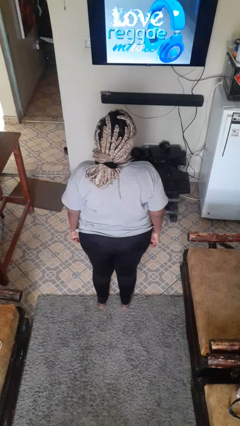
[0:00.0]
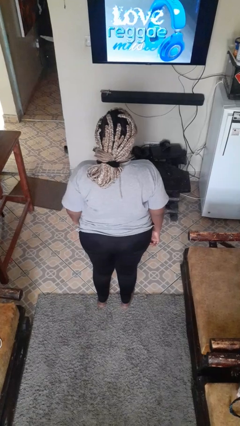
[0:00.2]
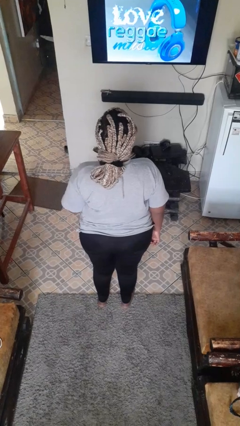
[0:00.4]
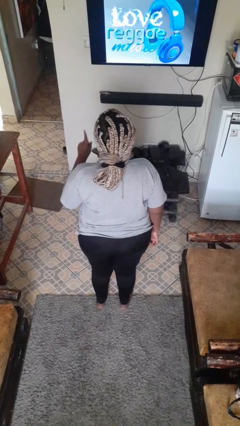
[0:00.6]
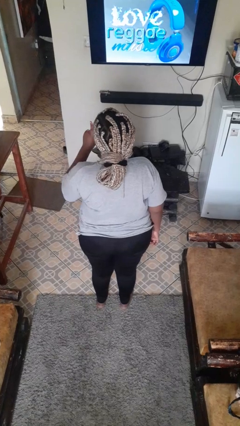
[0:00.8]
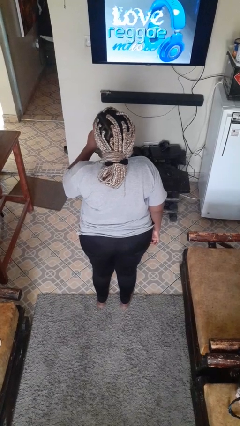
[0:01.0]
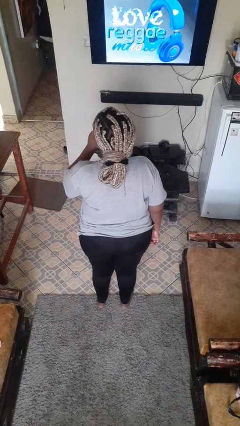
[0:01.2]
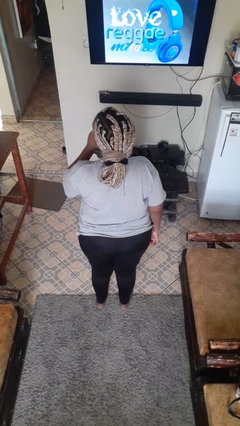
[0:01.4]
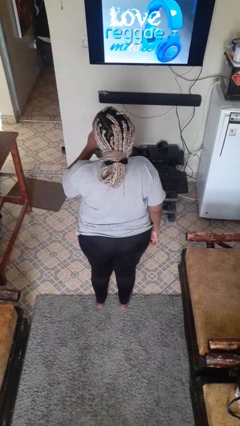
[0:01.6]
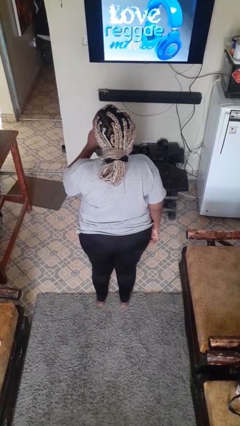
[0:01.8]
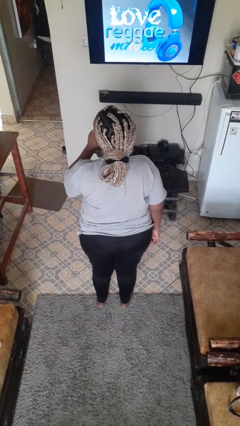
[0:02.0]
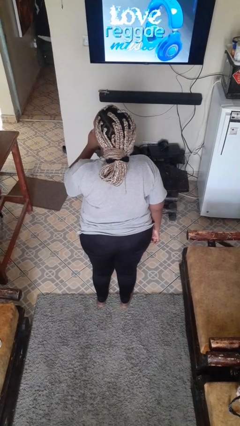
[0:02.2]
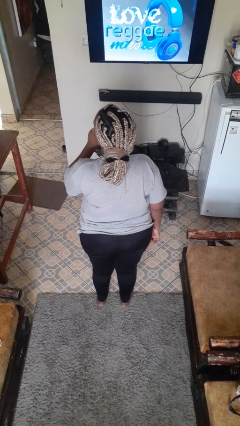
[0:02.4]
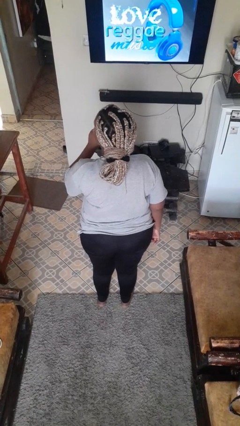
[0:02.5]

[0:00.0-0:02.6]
person gestures be quiet

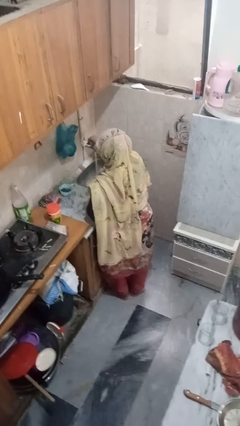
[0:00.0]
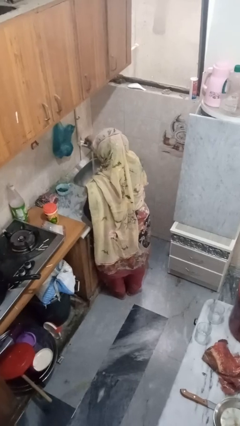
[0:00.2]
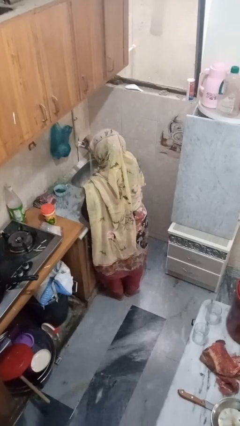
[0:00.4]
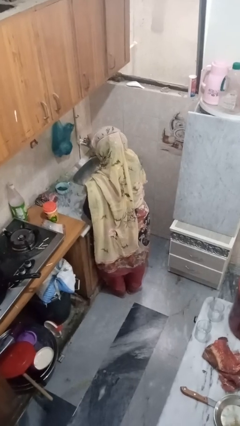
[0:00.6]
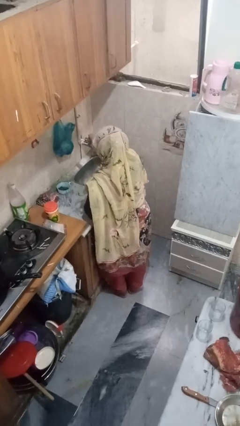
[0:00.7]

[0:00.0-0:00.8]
person turns off faucet

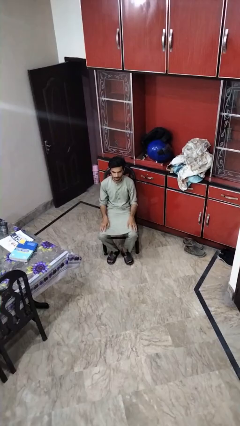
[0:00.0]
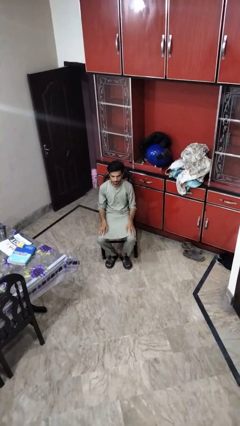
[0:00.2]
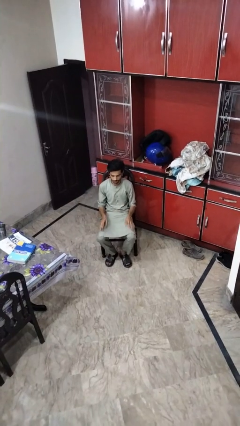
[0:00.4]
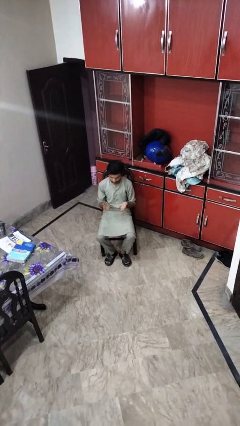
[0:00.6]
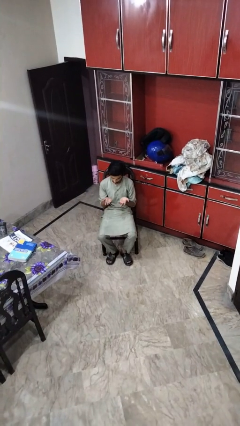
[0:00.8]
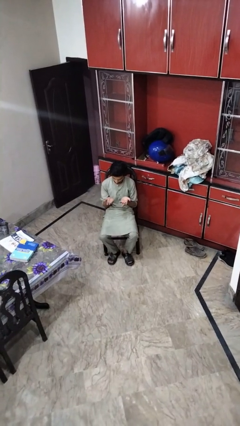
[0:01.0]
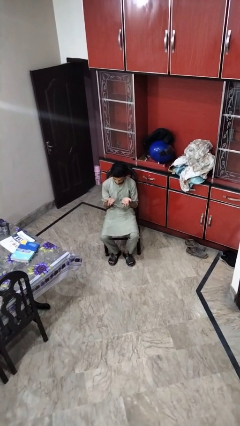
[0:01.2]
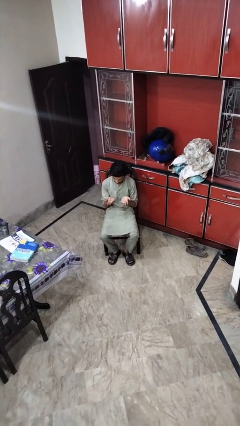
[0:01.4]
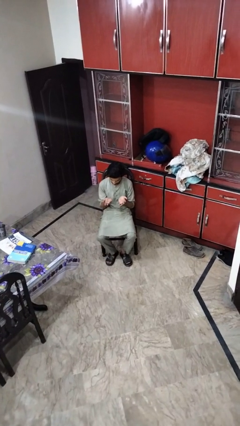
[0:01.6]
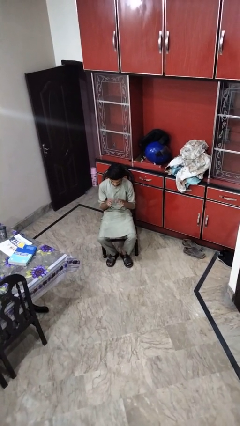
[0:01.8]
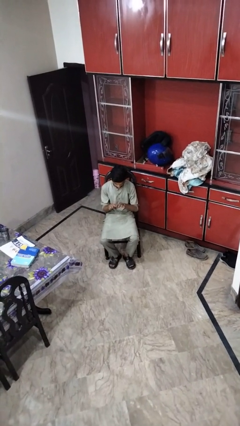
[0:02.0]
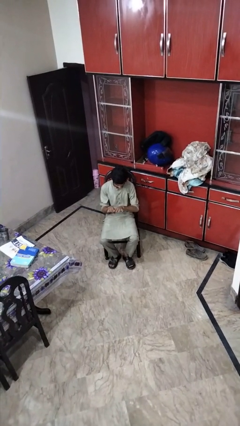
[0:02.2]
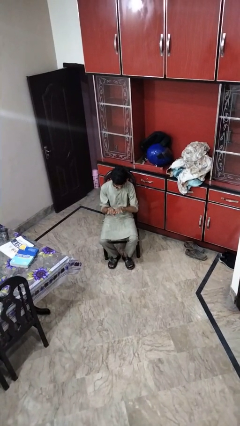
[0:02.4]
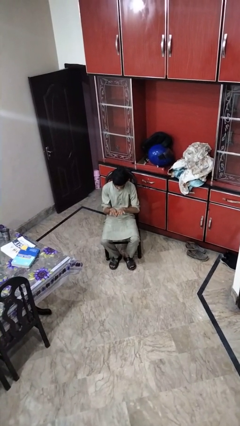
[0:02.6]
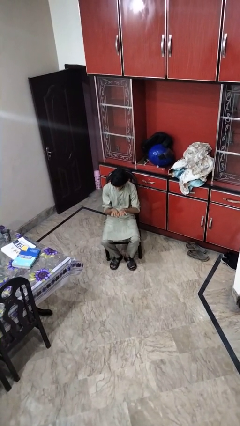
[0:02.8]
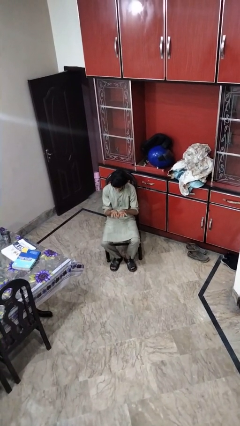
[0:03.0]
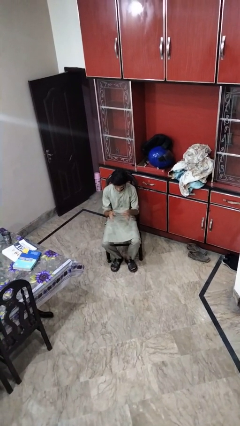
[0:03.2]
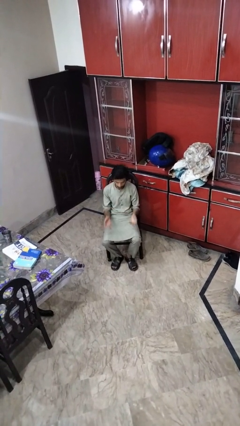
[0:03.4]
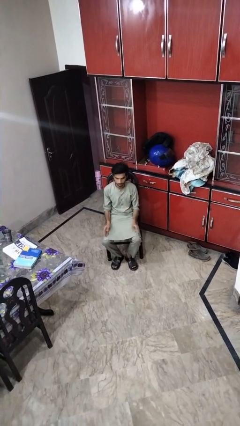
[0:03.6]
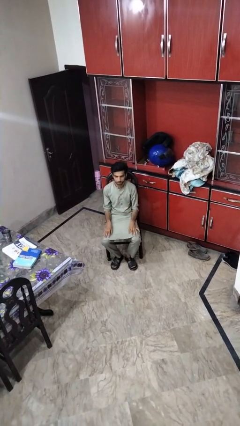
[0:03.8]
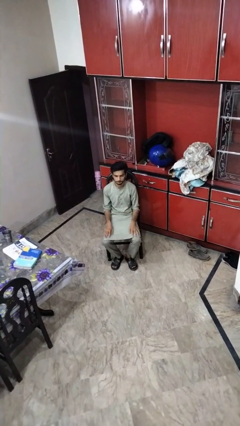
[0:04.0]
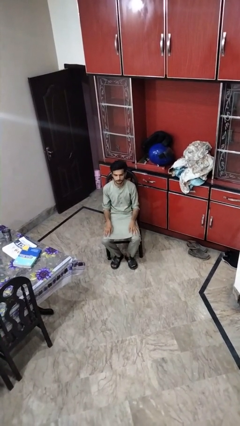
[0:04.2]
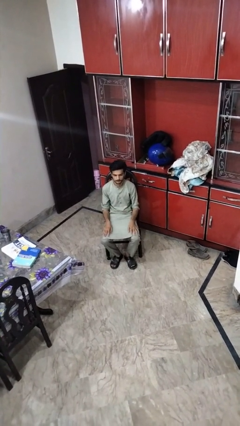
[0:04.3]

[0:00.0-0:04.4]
person looks at hands in lap

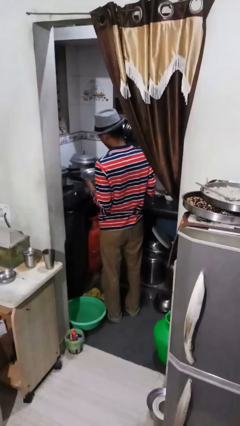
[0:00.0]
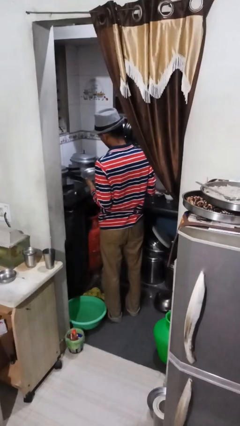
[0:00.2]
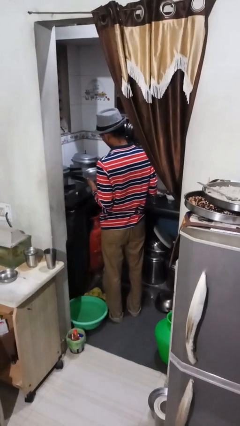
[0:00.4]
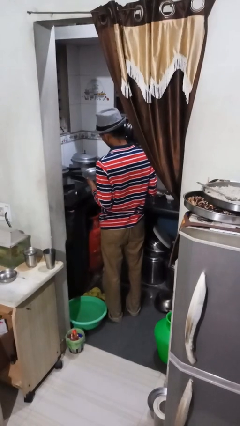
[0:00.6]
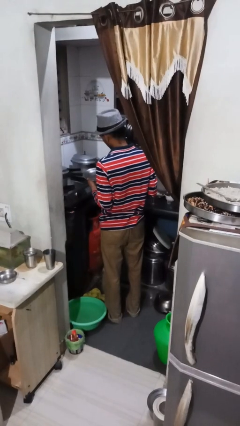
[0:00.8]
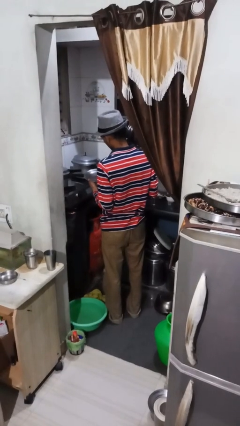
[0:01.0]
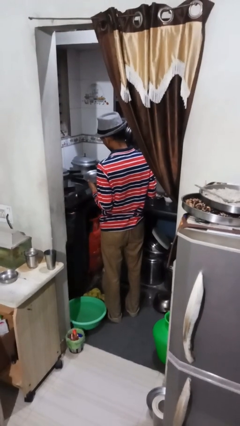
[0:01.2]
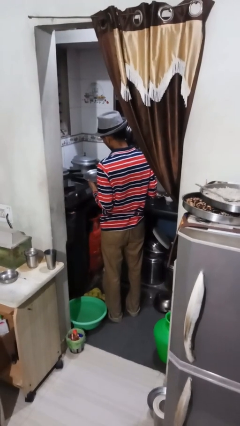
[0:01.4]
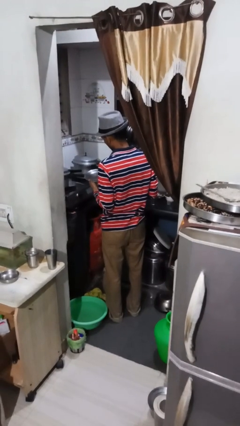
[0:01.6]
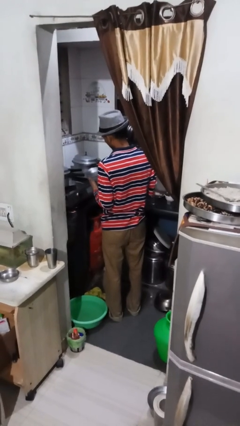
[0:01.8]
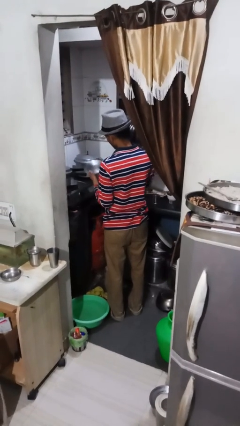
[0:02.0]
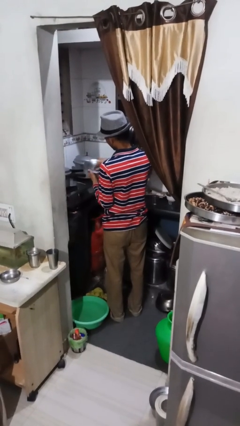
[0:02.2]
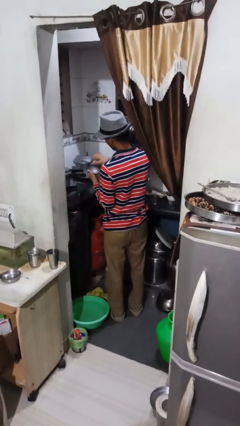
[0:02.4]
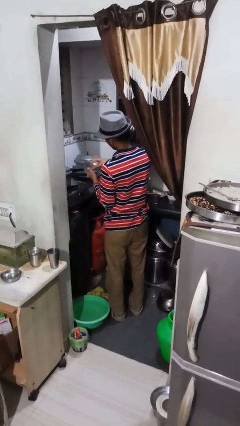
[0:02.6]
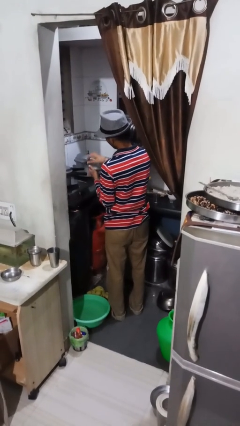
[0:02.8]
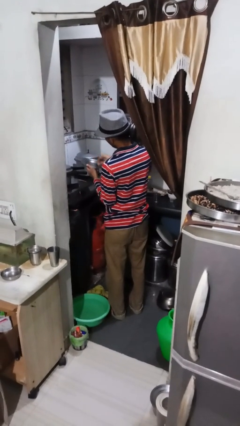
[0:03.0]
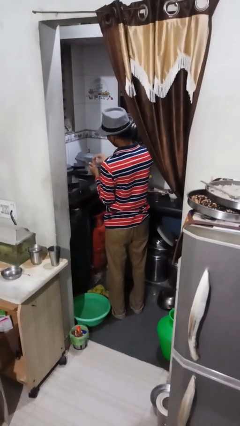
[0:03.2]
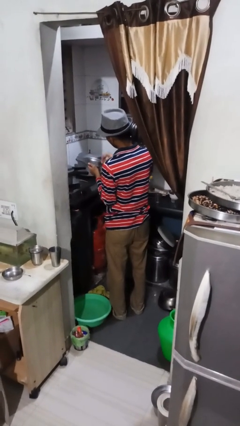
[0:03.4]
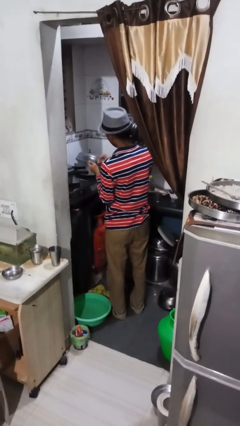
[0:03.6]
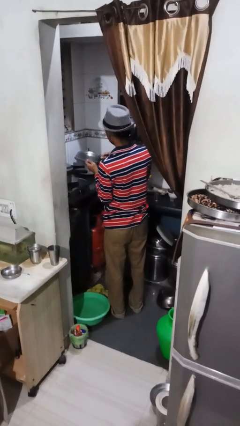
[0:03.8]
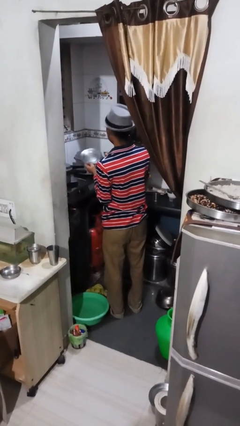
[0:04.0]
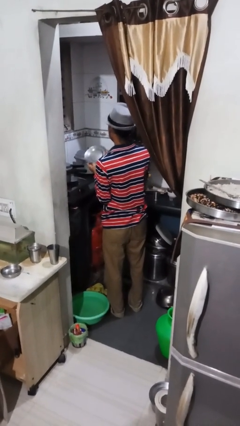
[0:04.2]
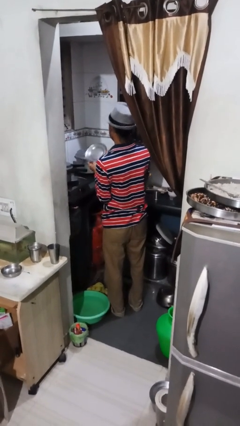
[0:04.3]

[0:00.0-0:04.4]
person washes dish

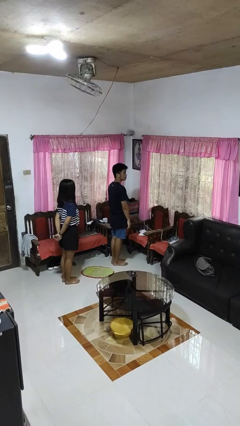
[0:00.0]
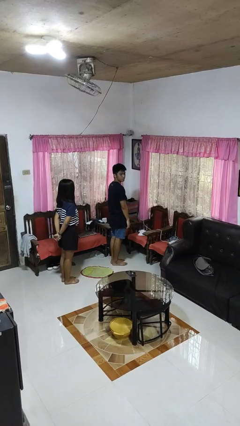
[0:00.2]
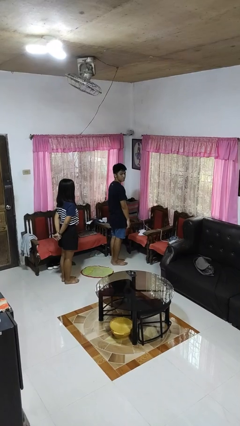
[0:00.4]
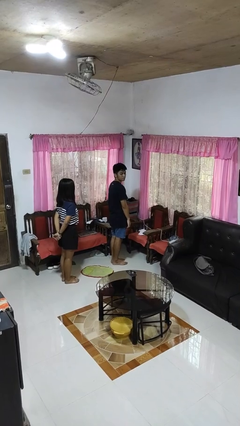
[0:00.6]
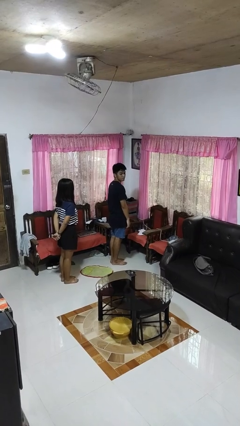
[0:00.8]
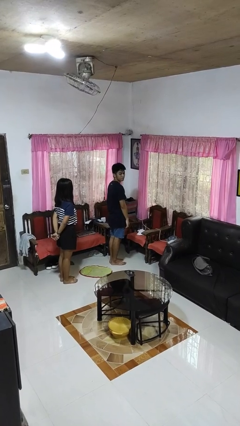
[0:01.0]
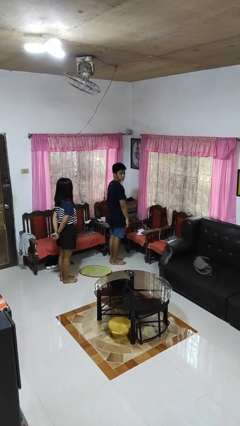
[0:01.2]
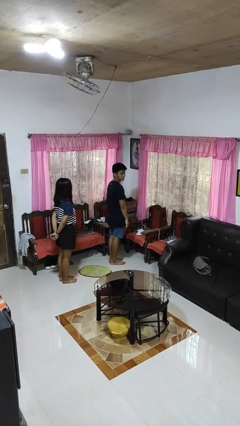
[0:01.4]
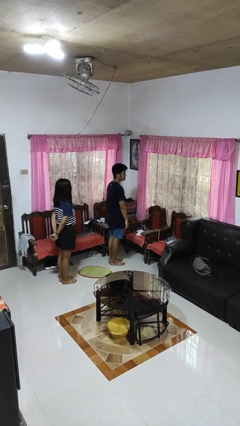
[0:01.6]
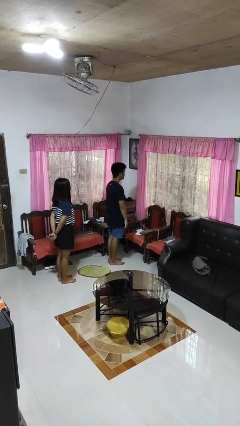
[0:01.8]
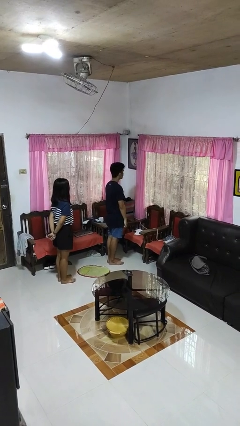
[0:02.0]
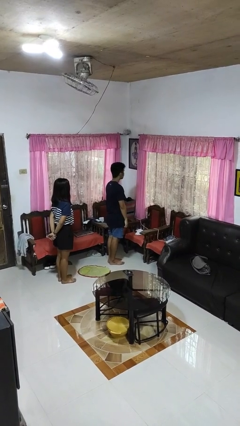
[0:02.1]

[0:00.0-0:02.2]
person looks over shoulder

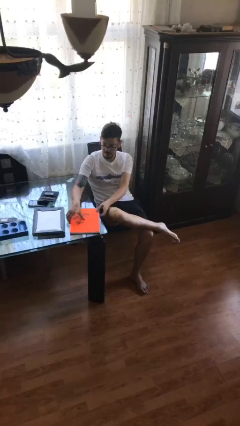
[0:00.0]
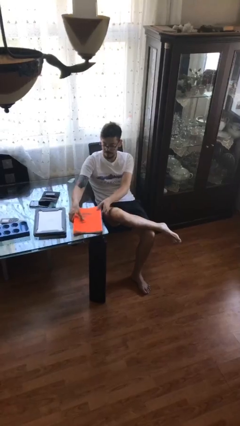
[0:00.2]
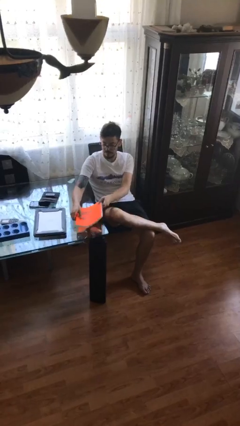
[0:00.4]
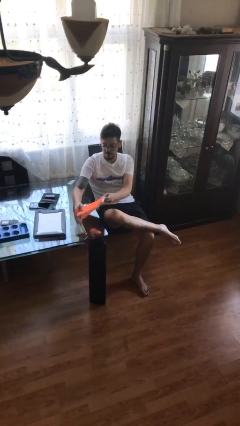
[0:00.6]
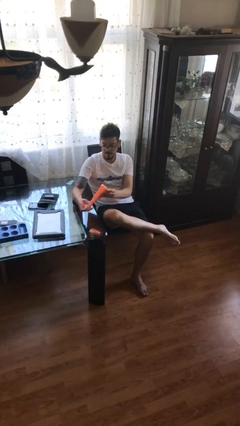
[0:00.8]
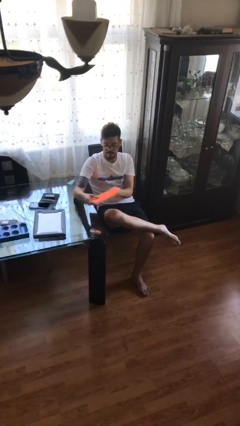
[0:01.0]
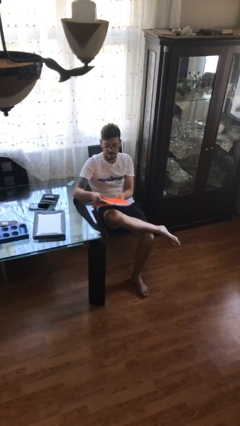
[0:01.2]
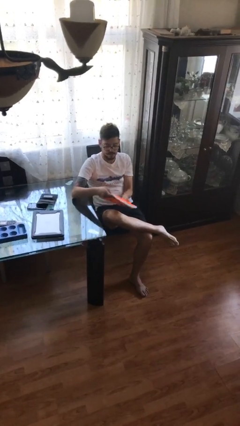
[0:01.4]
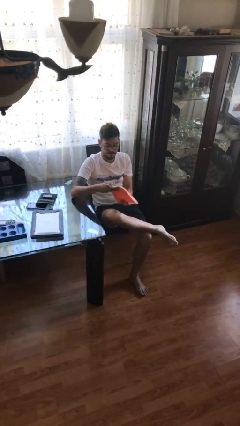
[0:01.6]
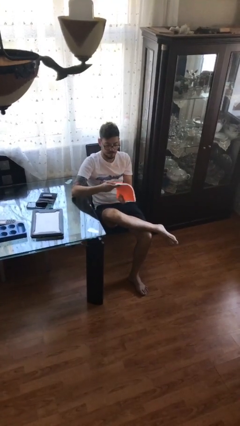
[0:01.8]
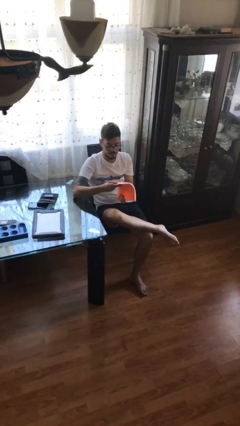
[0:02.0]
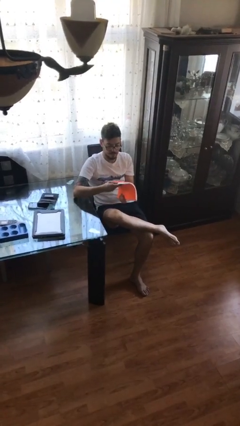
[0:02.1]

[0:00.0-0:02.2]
person picks up object from table

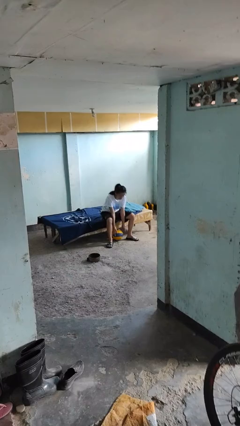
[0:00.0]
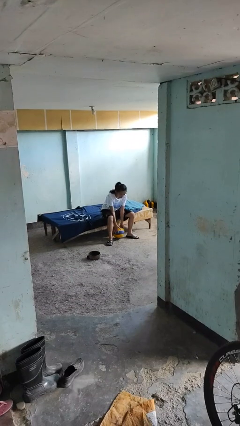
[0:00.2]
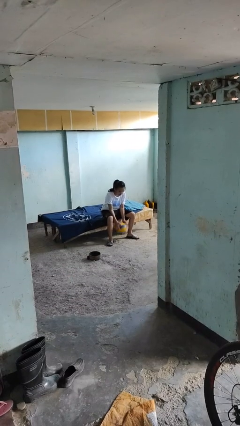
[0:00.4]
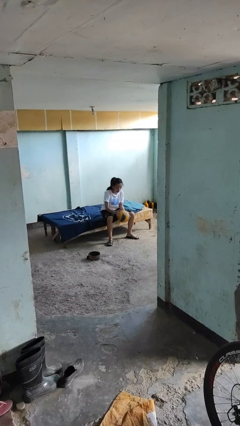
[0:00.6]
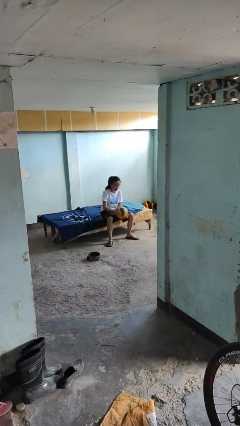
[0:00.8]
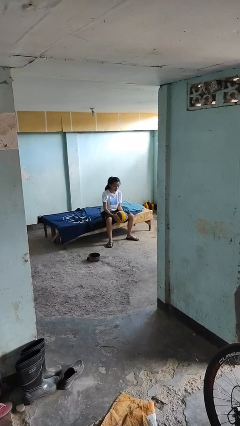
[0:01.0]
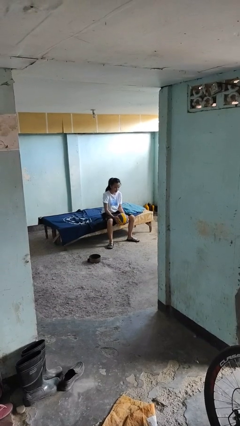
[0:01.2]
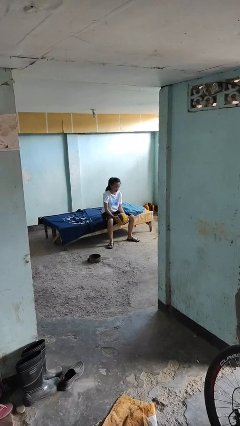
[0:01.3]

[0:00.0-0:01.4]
person picks up object from floor
